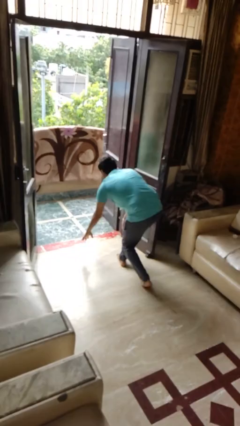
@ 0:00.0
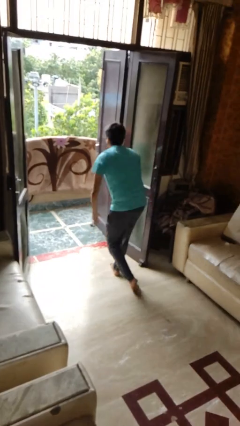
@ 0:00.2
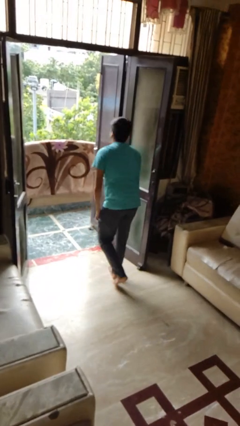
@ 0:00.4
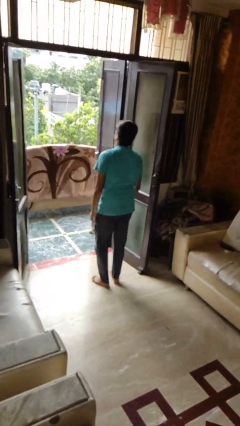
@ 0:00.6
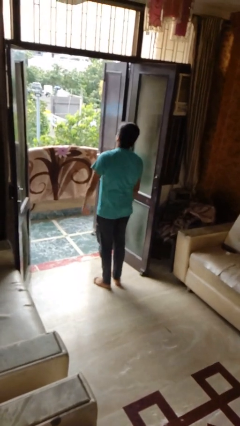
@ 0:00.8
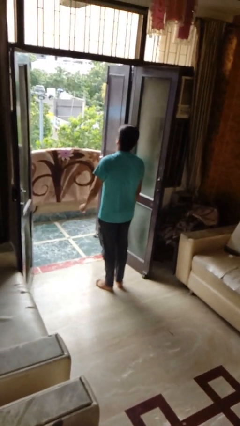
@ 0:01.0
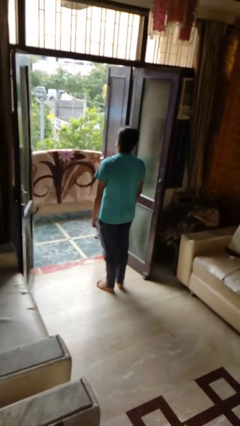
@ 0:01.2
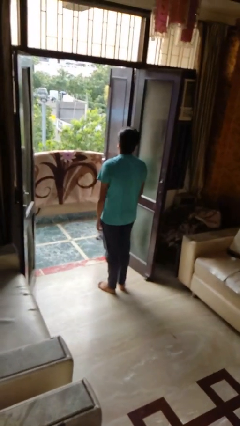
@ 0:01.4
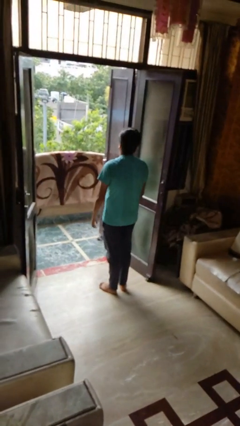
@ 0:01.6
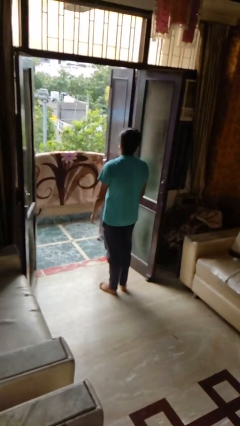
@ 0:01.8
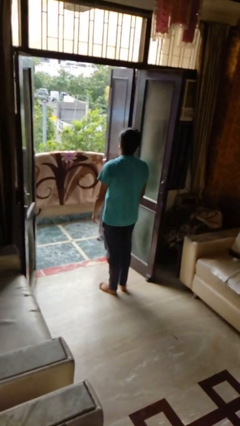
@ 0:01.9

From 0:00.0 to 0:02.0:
person stands up from floor

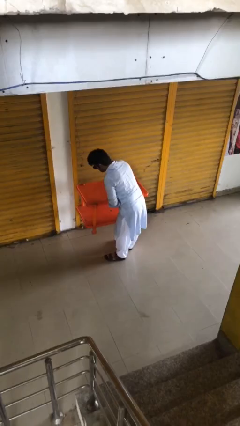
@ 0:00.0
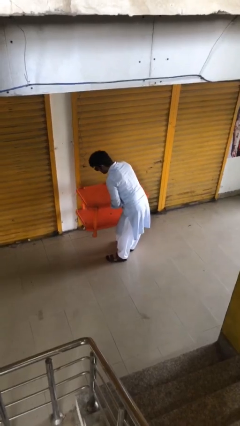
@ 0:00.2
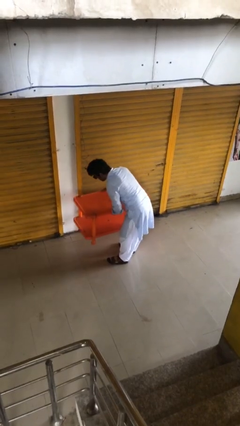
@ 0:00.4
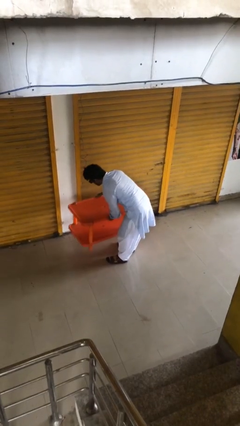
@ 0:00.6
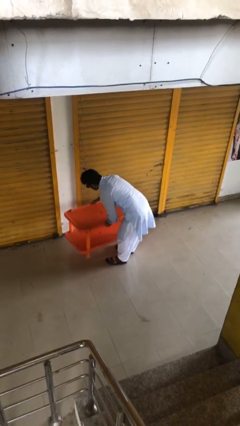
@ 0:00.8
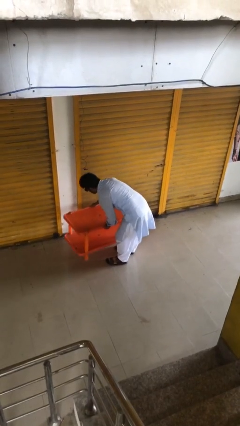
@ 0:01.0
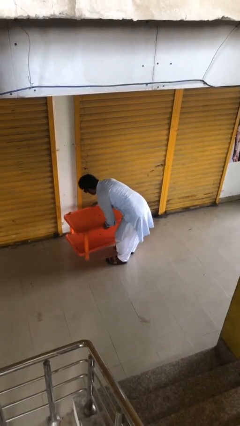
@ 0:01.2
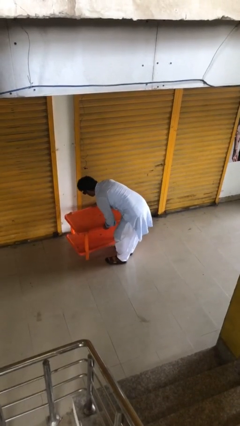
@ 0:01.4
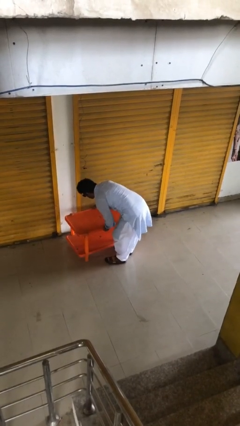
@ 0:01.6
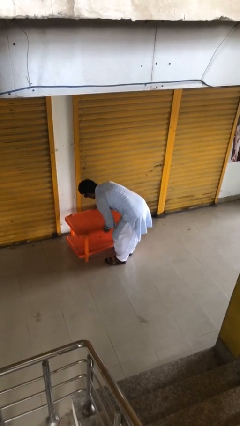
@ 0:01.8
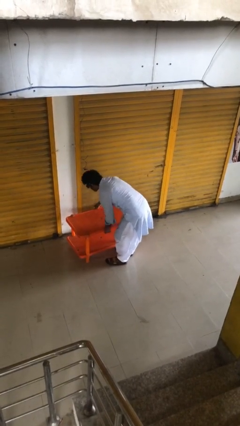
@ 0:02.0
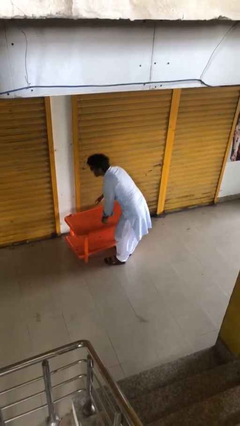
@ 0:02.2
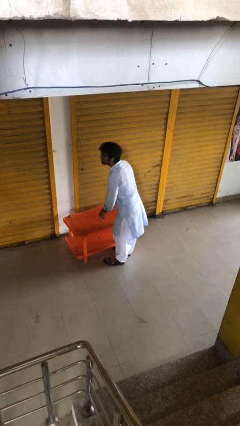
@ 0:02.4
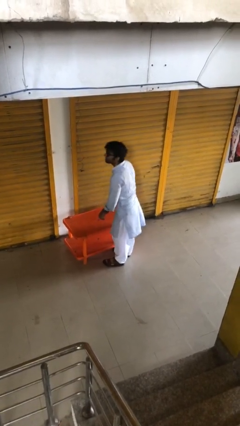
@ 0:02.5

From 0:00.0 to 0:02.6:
person puts down object on floor

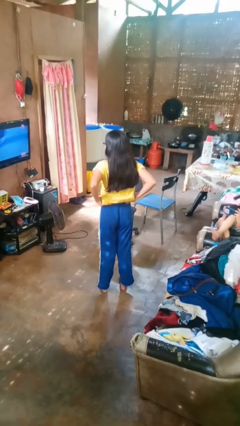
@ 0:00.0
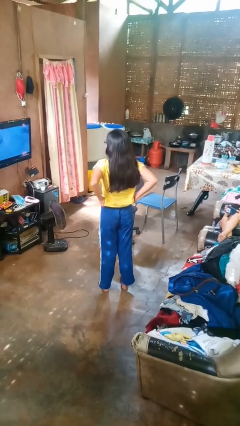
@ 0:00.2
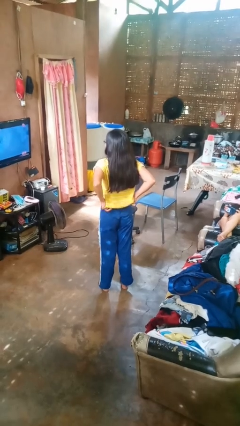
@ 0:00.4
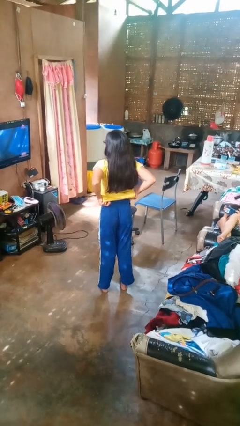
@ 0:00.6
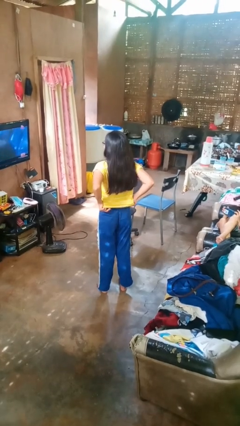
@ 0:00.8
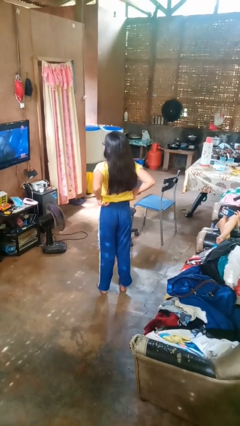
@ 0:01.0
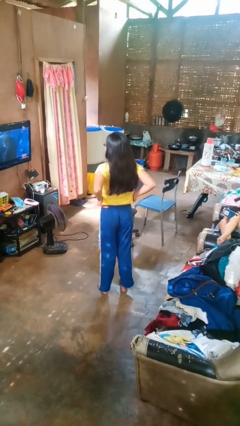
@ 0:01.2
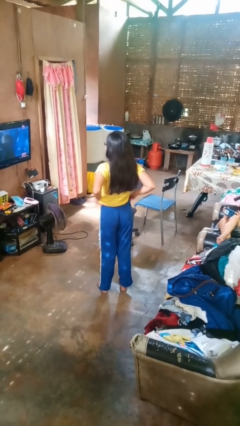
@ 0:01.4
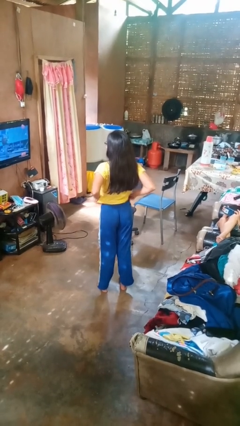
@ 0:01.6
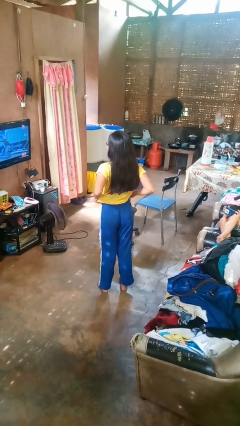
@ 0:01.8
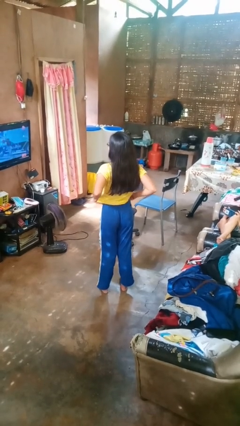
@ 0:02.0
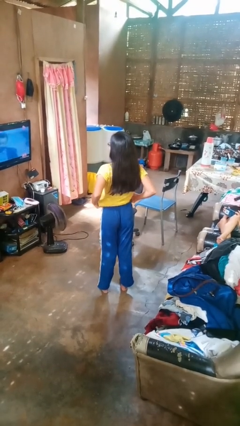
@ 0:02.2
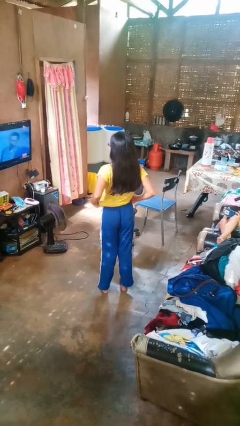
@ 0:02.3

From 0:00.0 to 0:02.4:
person hikes up pants

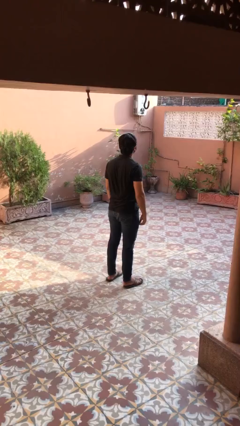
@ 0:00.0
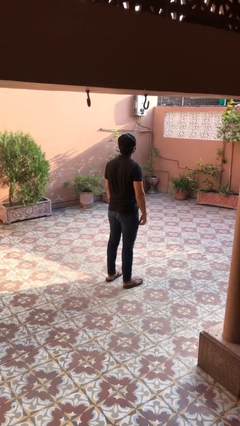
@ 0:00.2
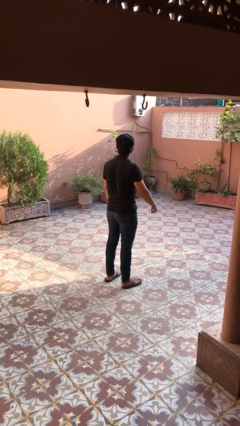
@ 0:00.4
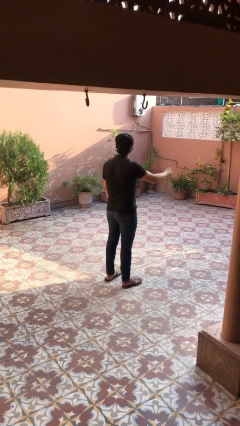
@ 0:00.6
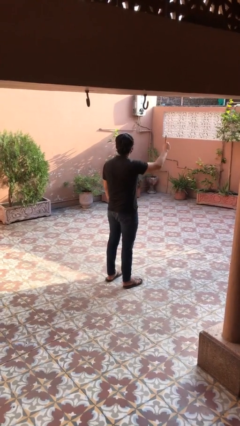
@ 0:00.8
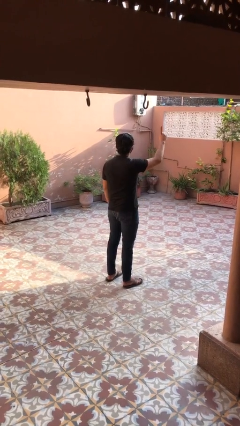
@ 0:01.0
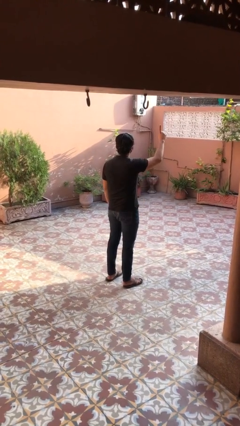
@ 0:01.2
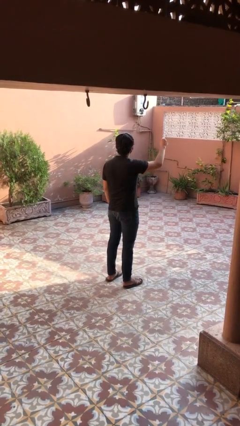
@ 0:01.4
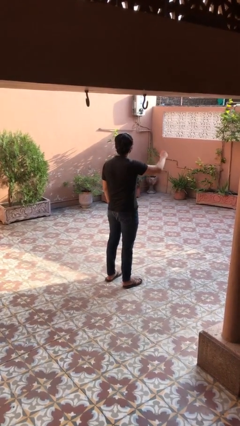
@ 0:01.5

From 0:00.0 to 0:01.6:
person gestures number one

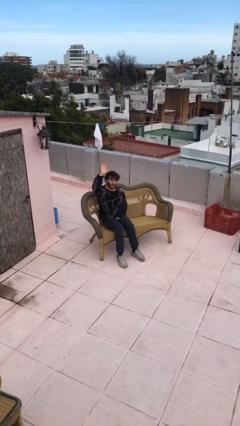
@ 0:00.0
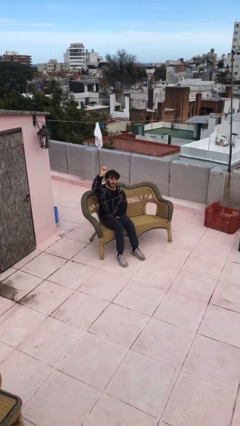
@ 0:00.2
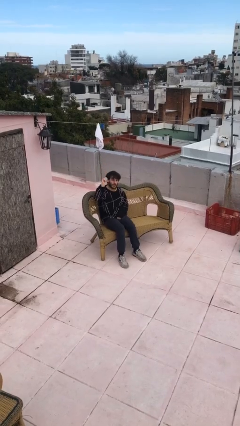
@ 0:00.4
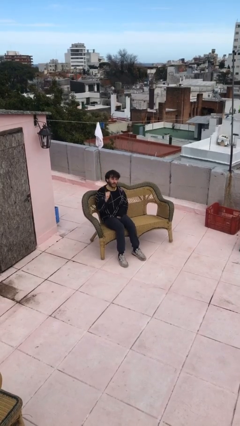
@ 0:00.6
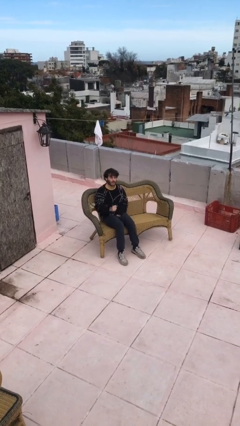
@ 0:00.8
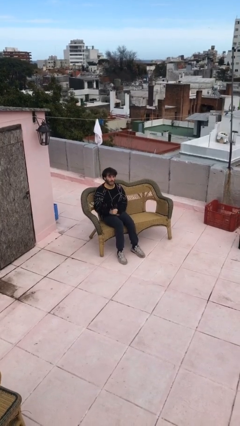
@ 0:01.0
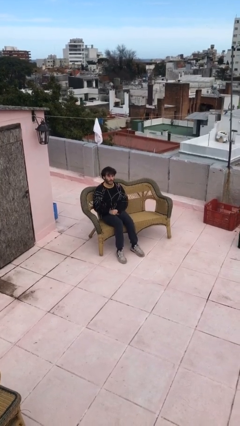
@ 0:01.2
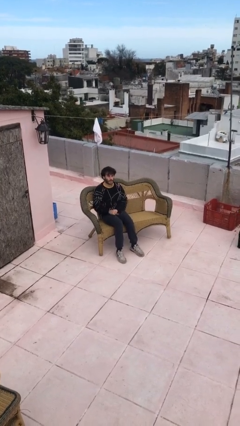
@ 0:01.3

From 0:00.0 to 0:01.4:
person gestures lower hand

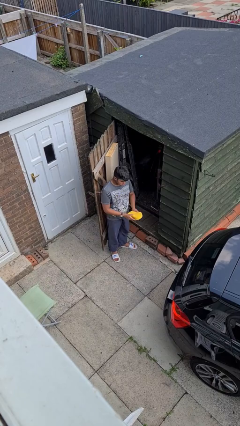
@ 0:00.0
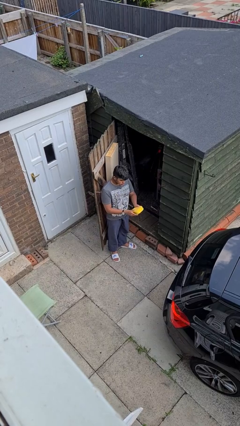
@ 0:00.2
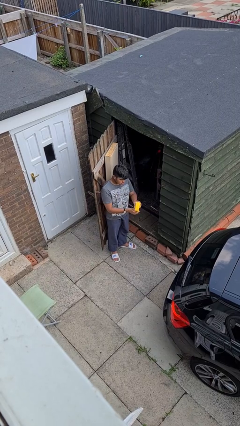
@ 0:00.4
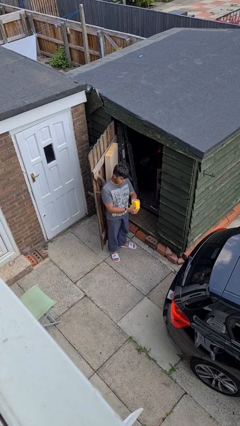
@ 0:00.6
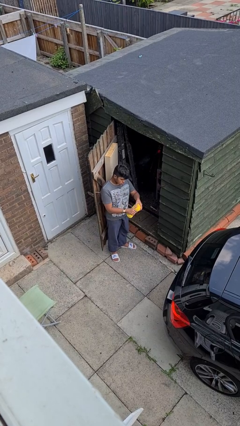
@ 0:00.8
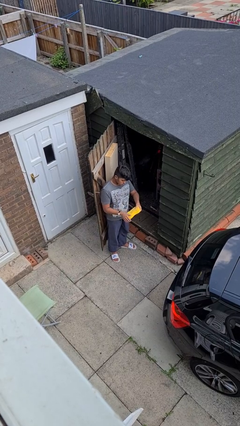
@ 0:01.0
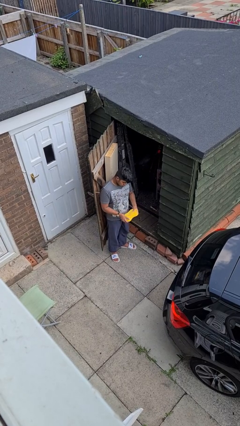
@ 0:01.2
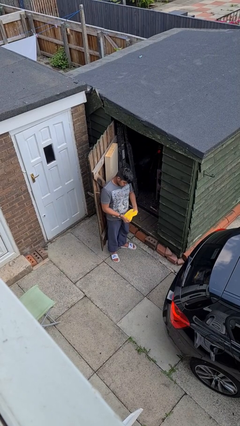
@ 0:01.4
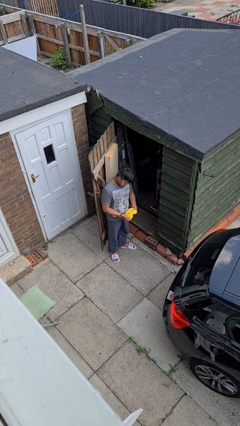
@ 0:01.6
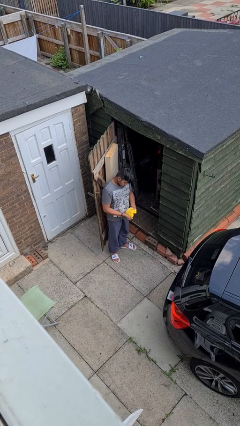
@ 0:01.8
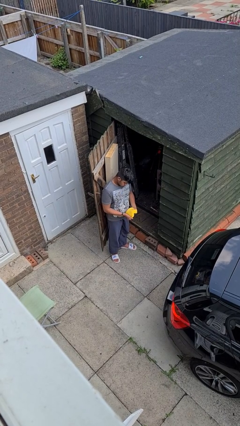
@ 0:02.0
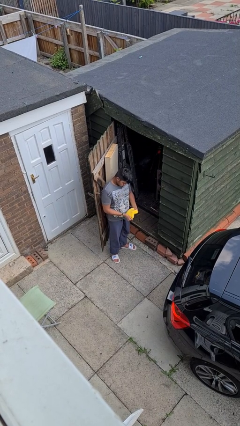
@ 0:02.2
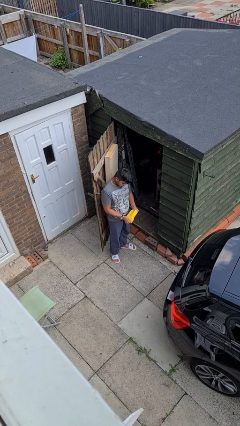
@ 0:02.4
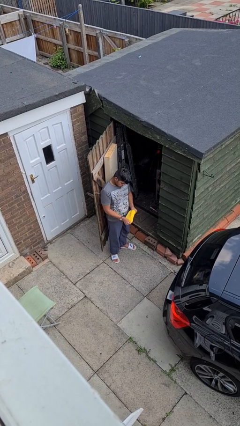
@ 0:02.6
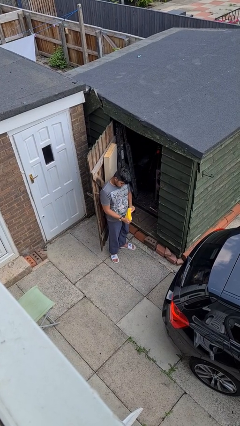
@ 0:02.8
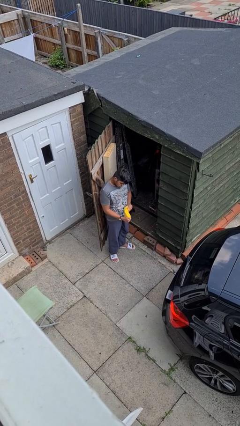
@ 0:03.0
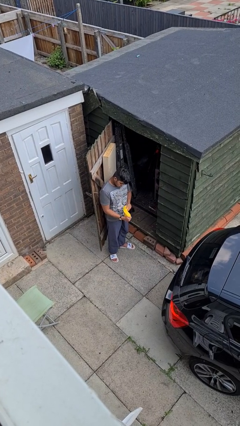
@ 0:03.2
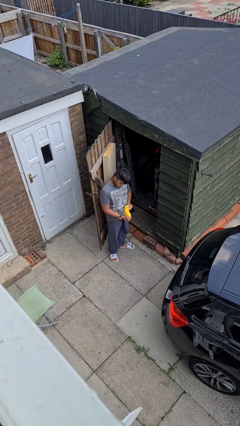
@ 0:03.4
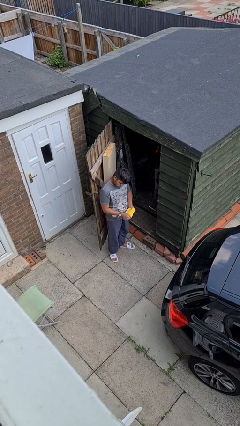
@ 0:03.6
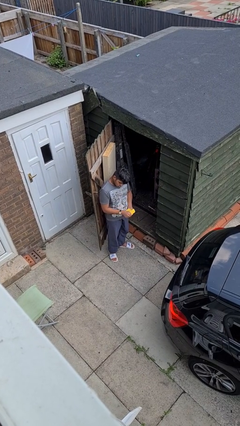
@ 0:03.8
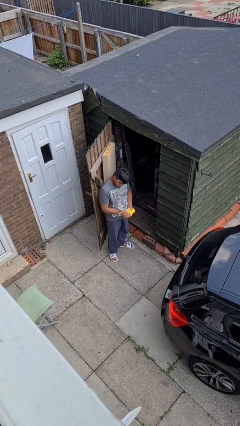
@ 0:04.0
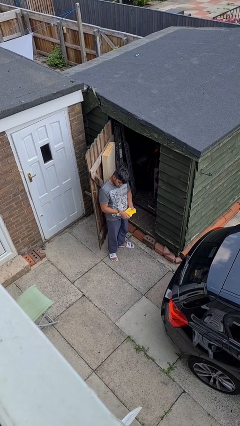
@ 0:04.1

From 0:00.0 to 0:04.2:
person squeezes object

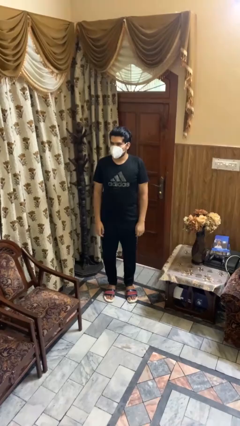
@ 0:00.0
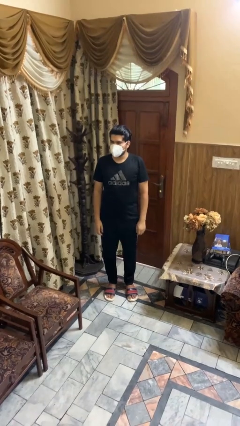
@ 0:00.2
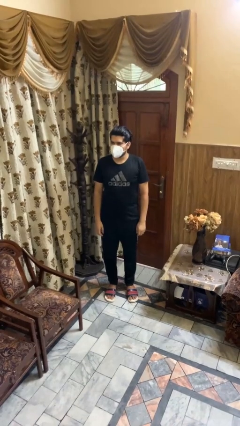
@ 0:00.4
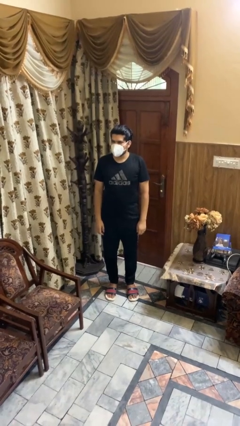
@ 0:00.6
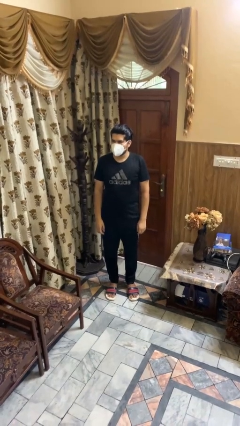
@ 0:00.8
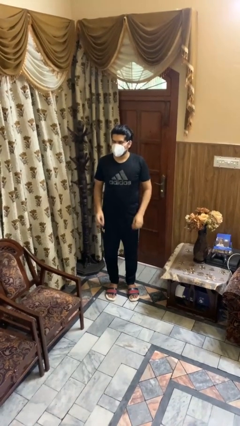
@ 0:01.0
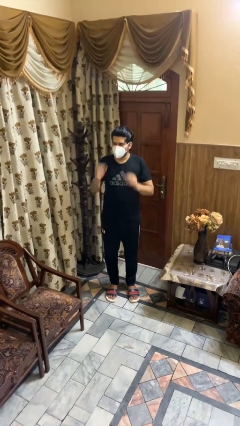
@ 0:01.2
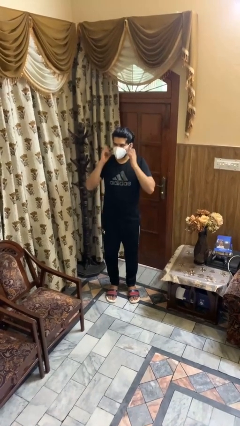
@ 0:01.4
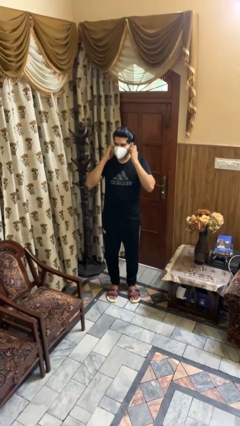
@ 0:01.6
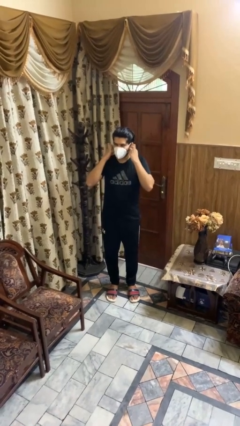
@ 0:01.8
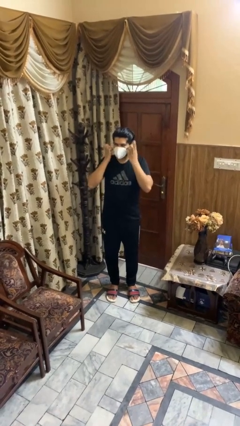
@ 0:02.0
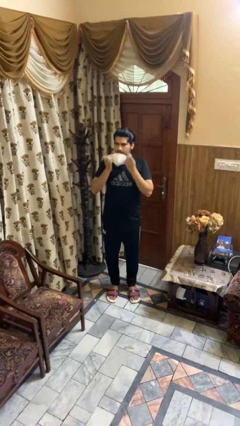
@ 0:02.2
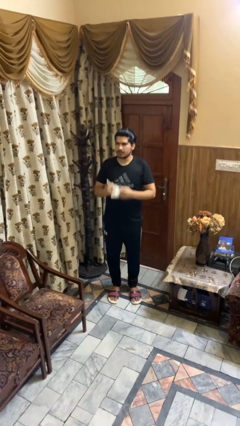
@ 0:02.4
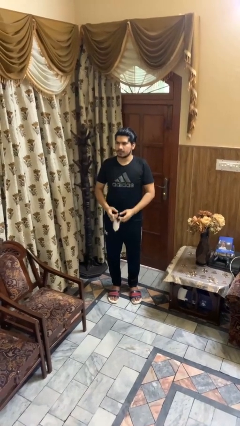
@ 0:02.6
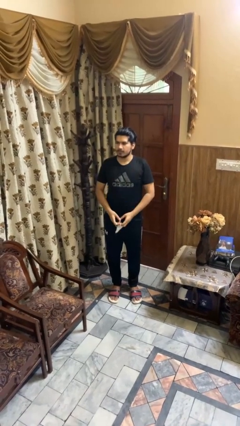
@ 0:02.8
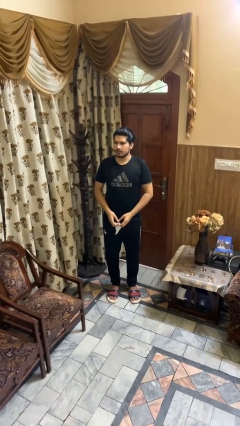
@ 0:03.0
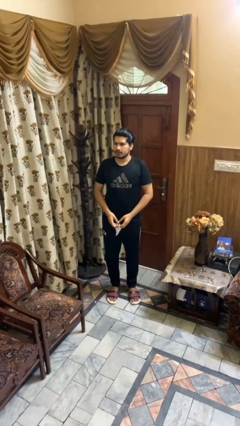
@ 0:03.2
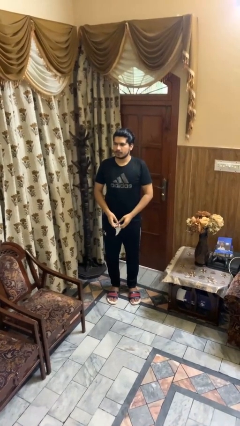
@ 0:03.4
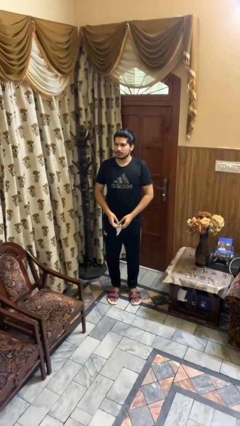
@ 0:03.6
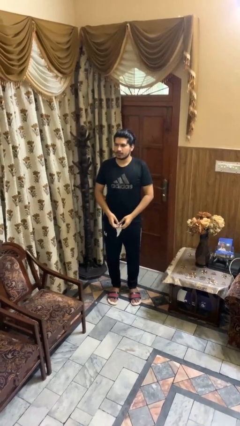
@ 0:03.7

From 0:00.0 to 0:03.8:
person takes off facemask
